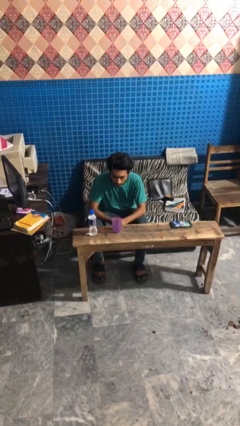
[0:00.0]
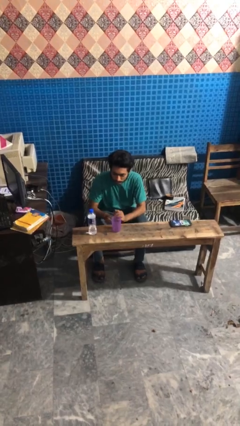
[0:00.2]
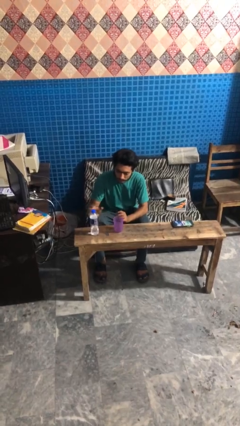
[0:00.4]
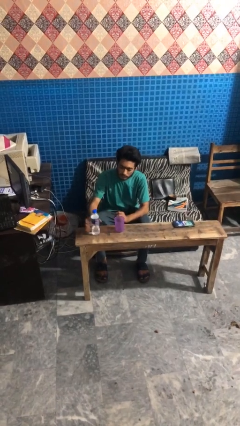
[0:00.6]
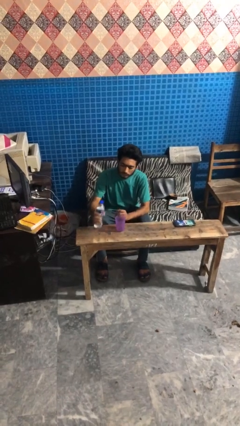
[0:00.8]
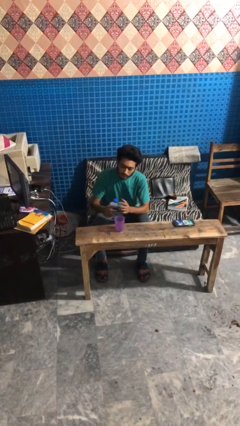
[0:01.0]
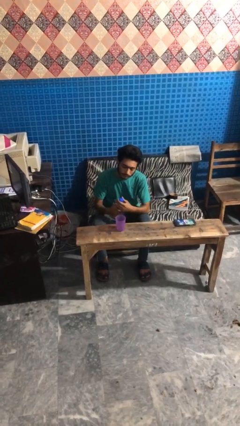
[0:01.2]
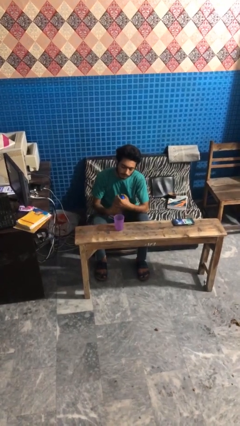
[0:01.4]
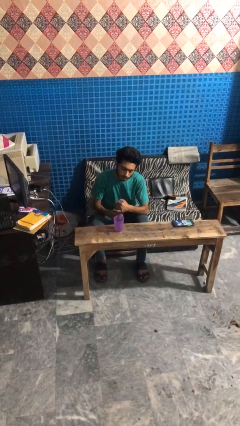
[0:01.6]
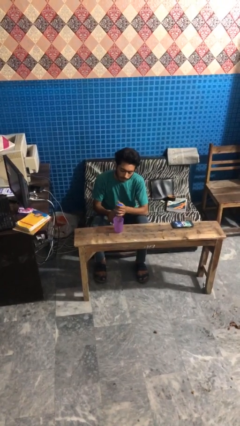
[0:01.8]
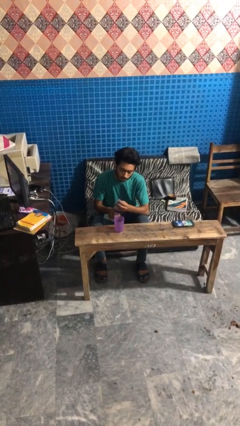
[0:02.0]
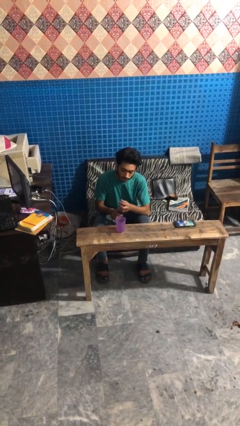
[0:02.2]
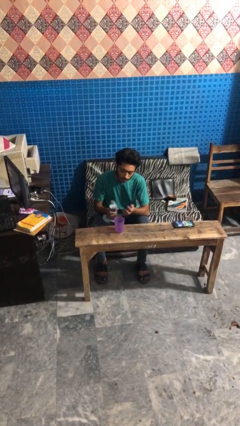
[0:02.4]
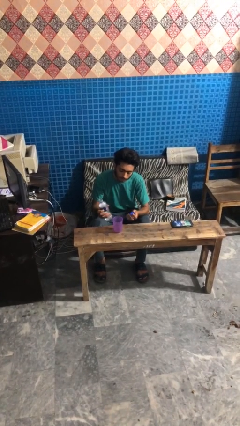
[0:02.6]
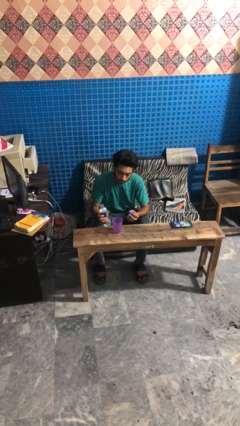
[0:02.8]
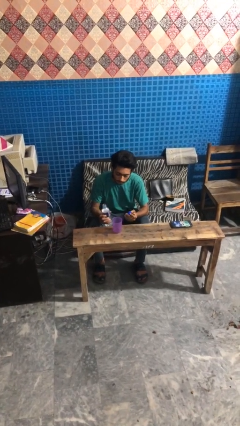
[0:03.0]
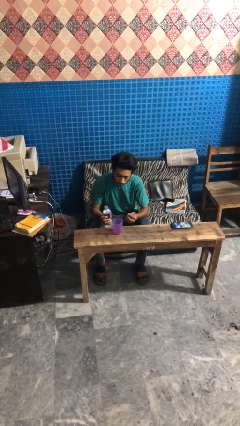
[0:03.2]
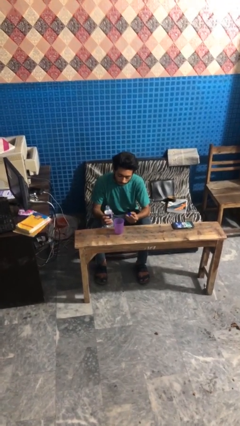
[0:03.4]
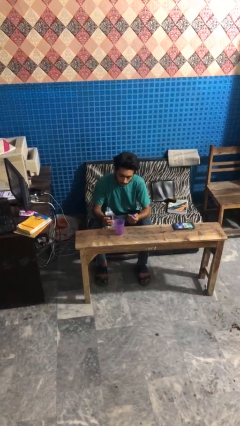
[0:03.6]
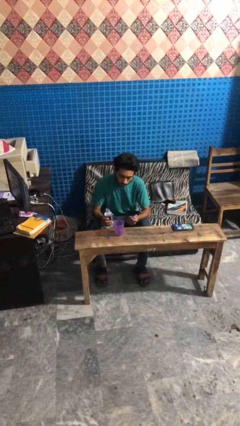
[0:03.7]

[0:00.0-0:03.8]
person unscrews lid from bottle

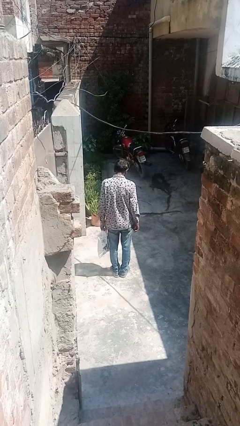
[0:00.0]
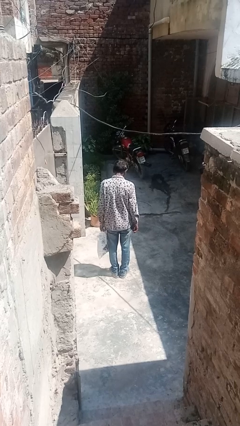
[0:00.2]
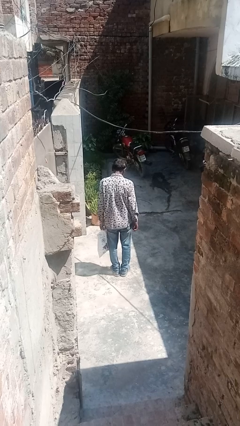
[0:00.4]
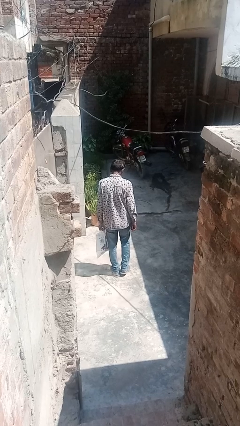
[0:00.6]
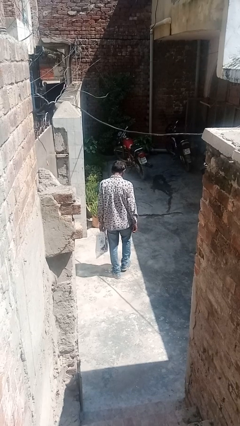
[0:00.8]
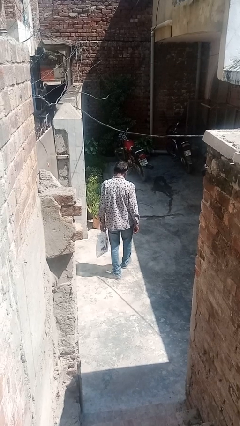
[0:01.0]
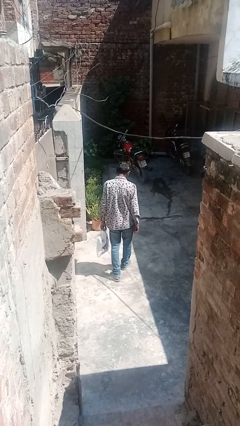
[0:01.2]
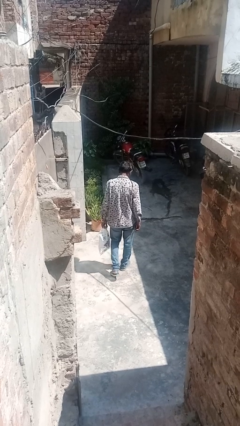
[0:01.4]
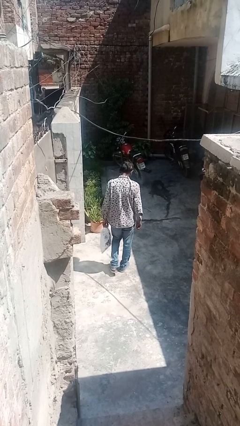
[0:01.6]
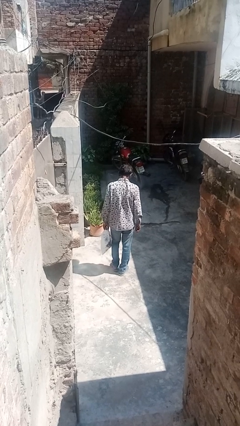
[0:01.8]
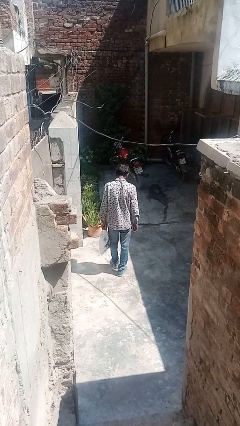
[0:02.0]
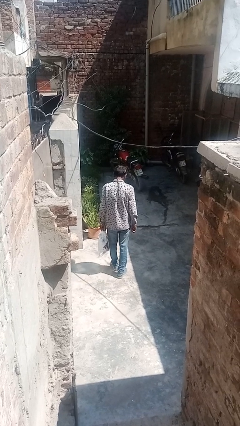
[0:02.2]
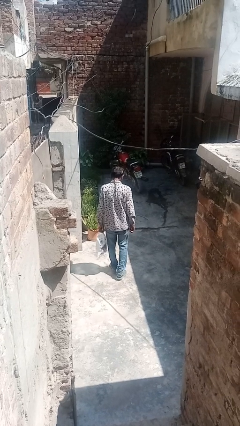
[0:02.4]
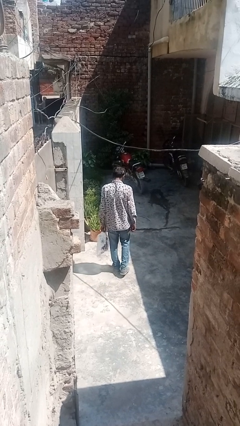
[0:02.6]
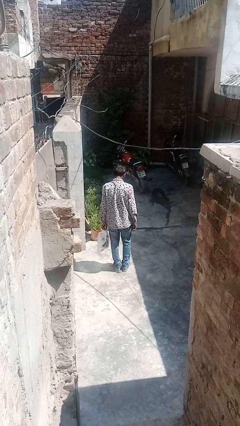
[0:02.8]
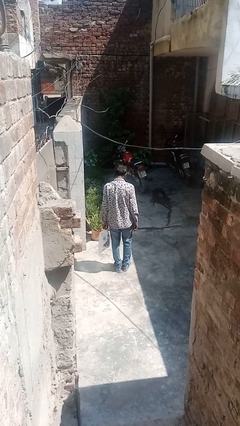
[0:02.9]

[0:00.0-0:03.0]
person carries groceries

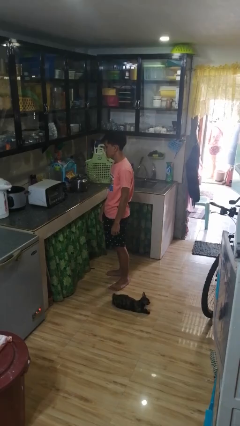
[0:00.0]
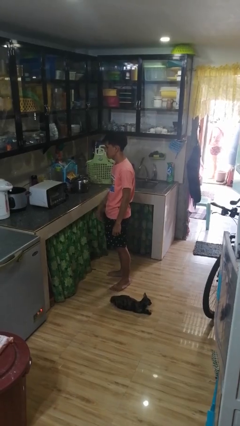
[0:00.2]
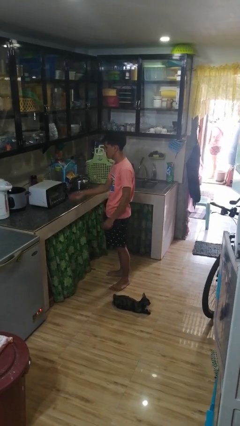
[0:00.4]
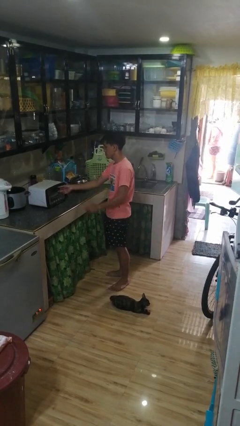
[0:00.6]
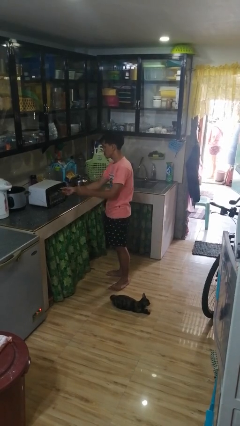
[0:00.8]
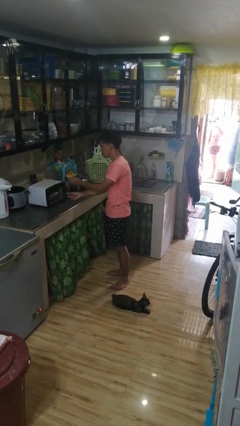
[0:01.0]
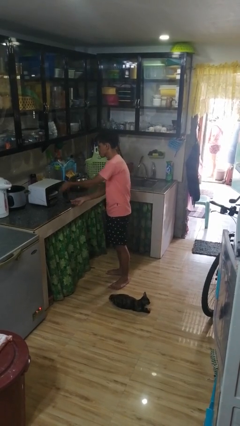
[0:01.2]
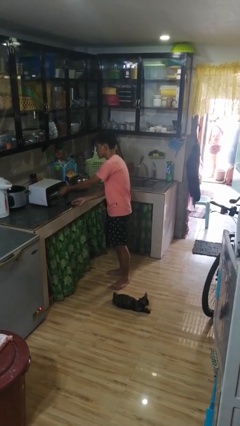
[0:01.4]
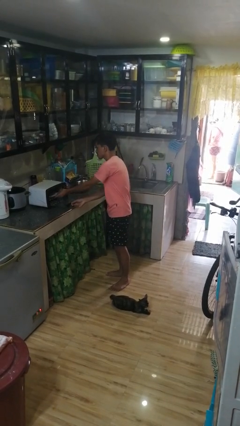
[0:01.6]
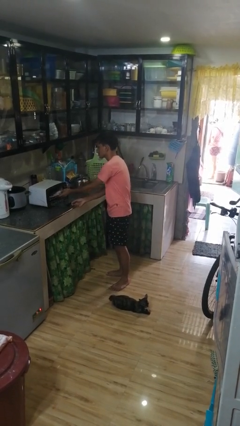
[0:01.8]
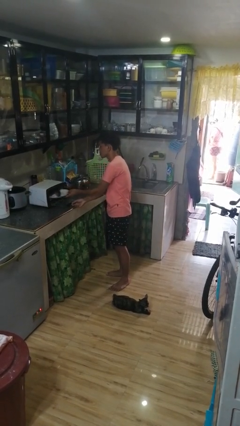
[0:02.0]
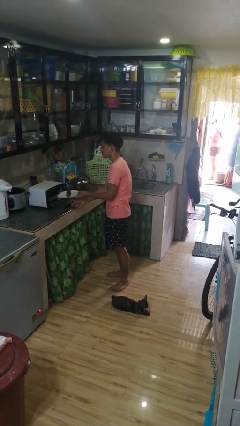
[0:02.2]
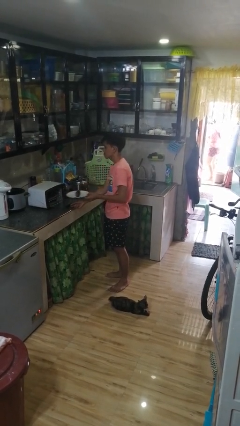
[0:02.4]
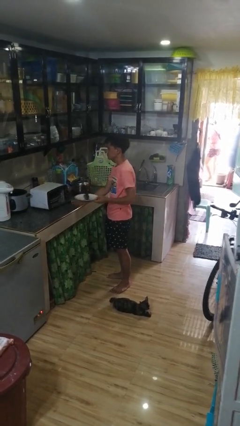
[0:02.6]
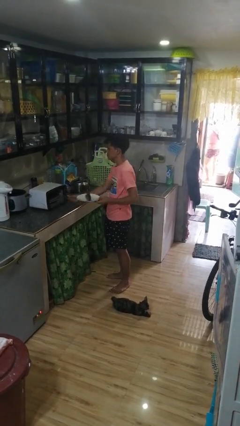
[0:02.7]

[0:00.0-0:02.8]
person takes object from microwave

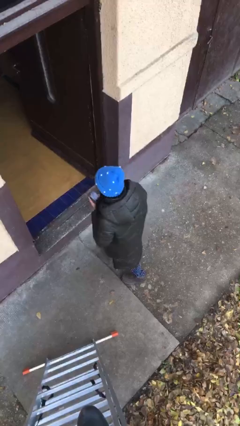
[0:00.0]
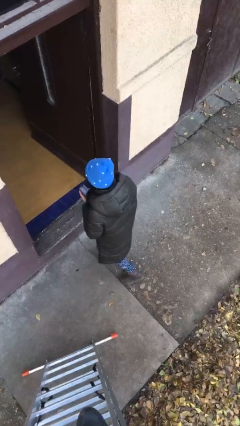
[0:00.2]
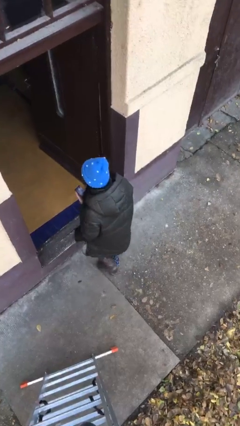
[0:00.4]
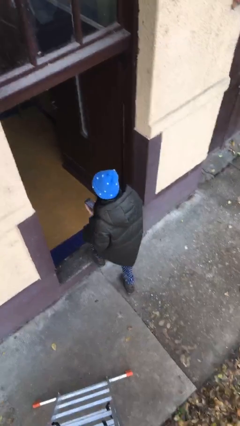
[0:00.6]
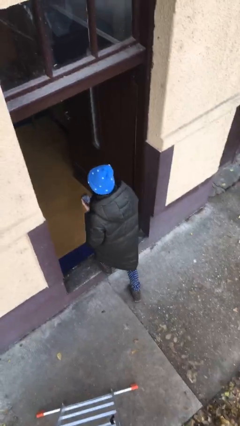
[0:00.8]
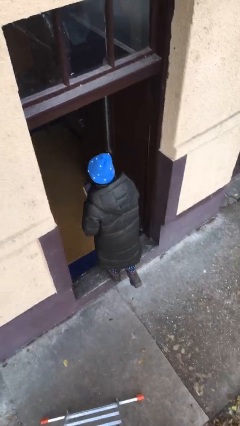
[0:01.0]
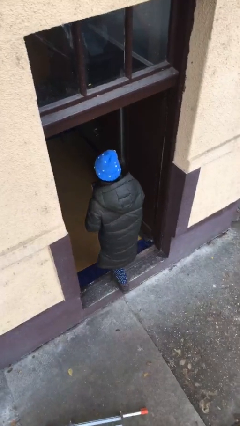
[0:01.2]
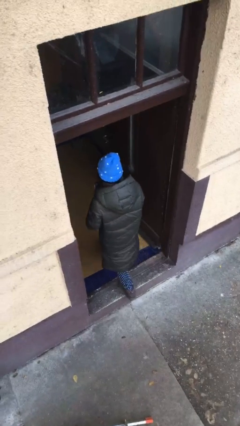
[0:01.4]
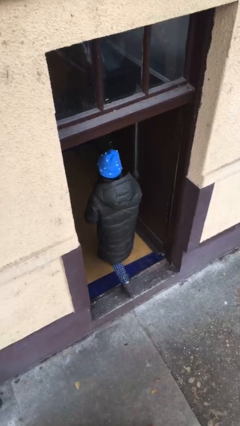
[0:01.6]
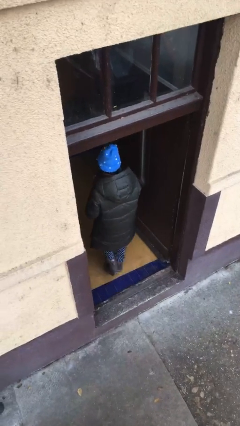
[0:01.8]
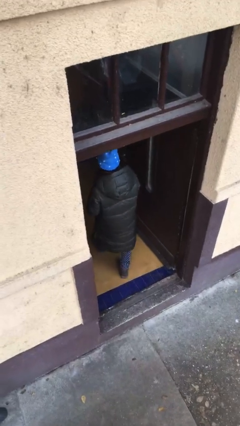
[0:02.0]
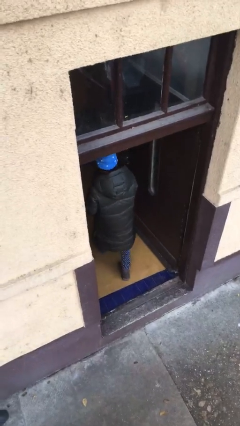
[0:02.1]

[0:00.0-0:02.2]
person exits scene through structure

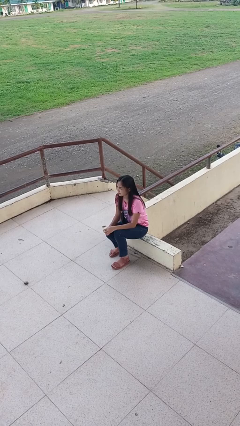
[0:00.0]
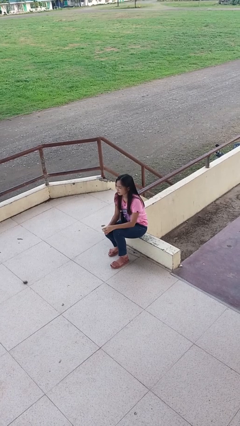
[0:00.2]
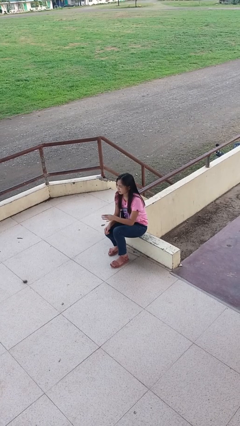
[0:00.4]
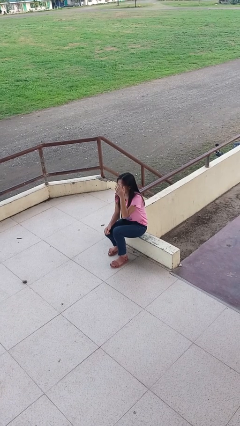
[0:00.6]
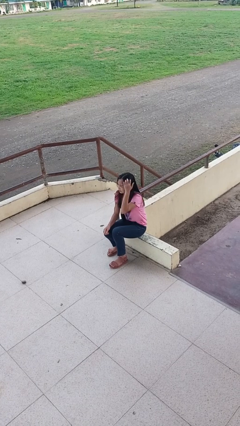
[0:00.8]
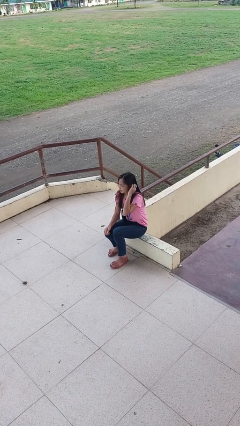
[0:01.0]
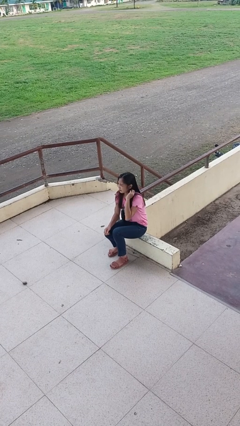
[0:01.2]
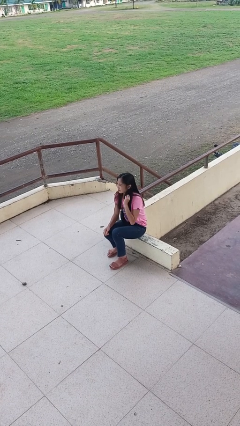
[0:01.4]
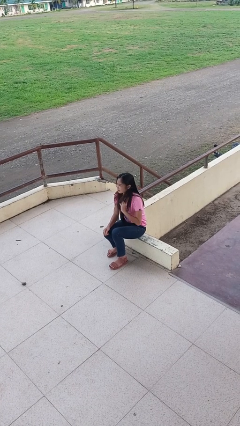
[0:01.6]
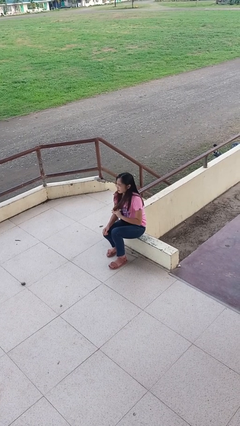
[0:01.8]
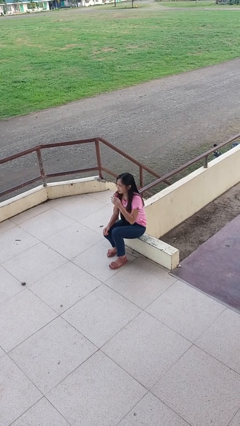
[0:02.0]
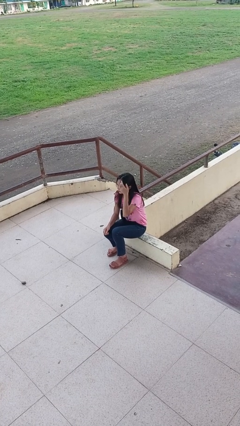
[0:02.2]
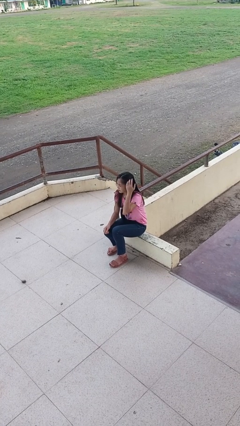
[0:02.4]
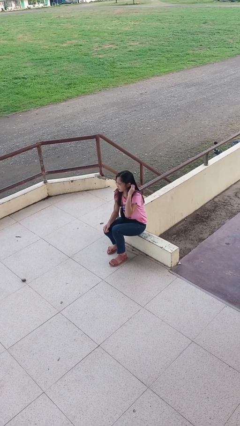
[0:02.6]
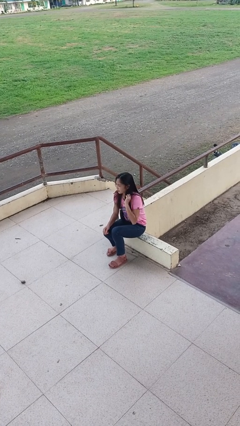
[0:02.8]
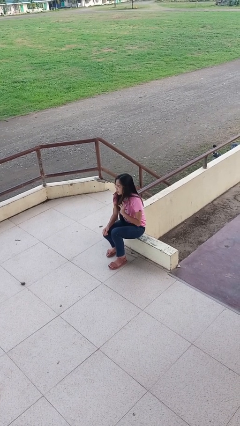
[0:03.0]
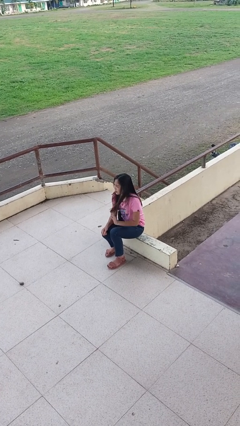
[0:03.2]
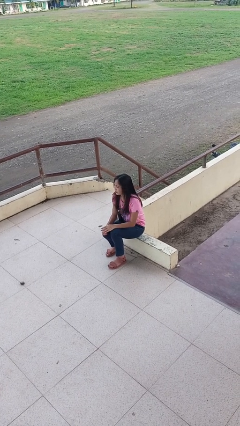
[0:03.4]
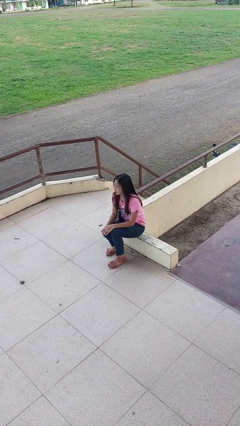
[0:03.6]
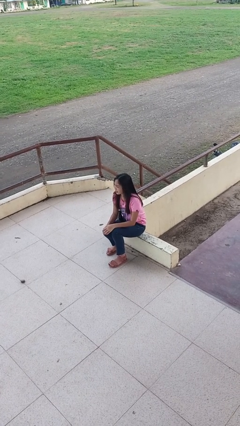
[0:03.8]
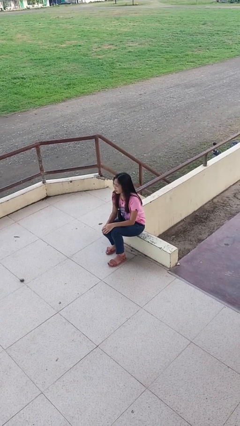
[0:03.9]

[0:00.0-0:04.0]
person strokes hair

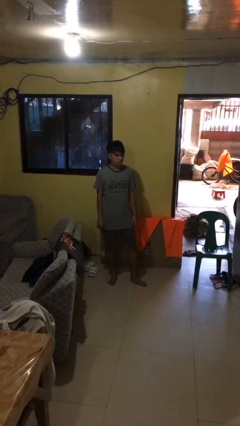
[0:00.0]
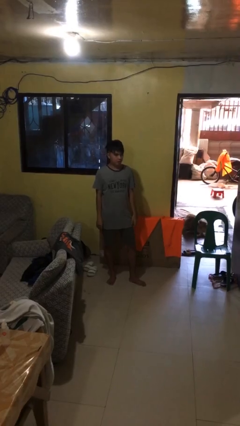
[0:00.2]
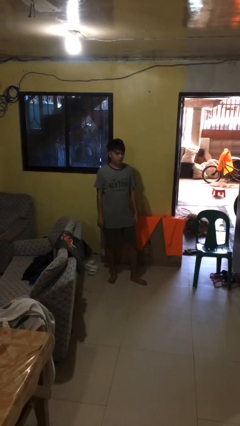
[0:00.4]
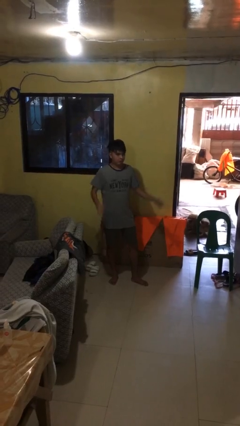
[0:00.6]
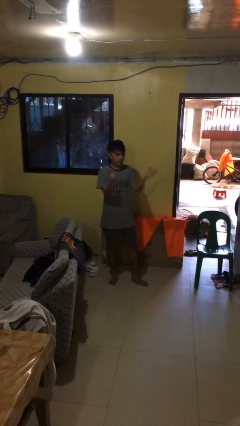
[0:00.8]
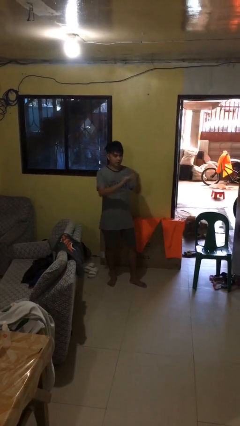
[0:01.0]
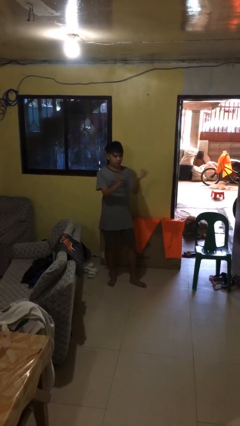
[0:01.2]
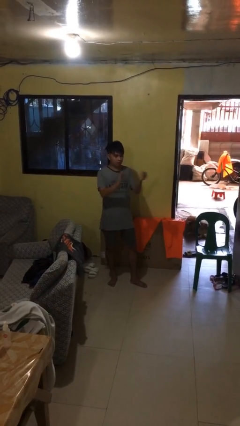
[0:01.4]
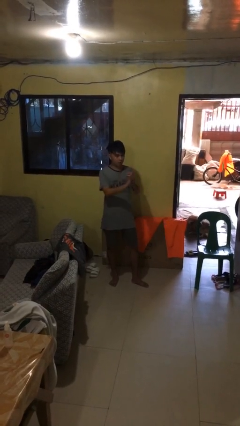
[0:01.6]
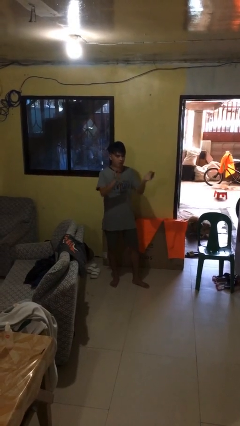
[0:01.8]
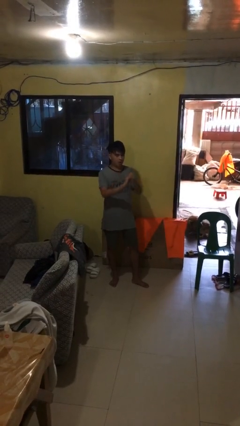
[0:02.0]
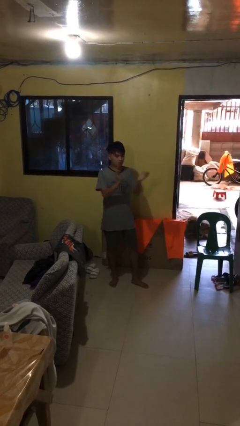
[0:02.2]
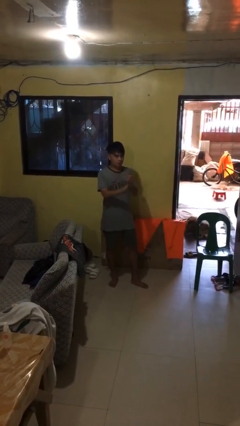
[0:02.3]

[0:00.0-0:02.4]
person claps hands
